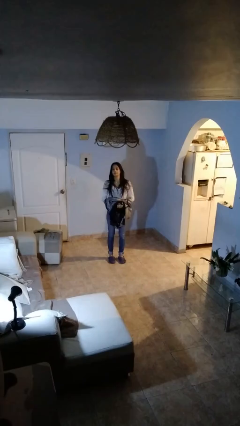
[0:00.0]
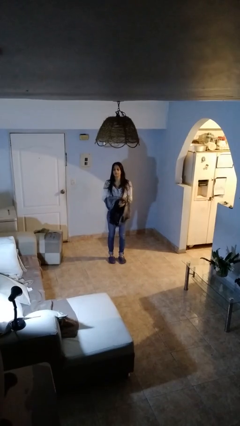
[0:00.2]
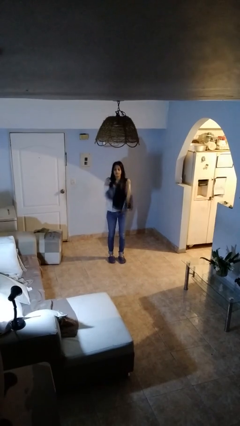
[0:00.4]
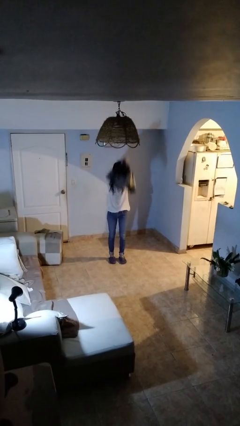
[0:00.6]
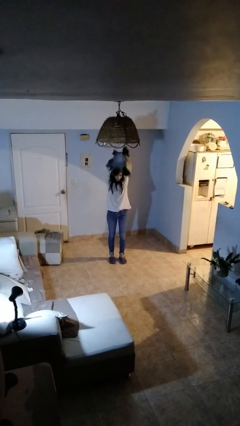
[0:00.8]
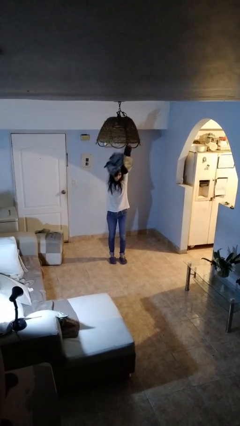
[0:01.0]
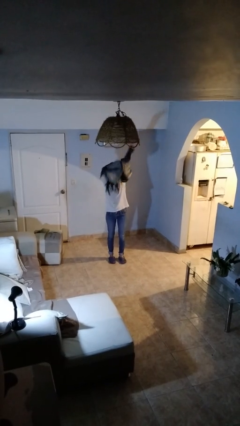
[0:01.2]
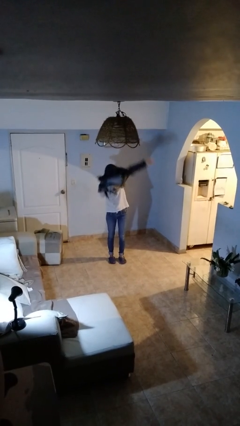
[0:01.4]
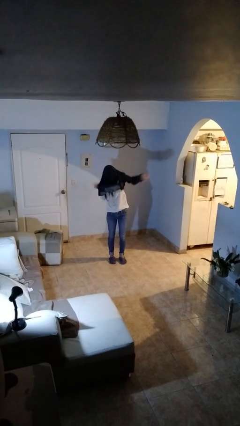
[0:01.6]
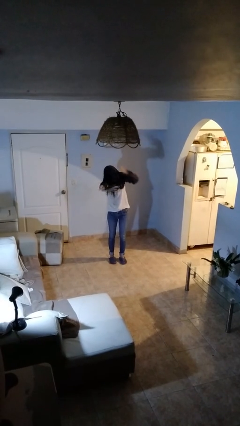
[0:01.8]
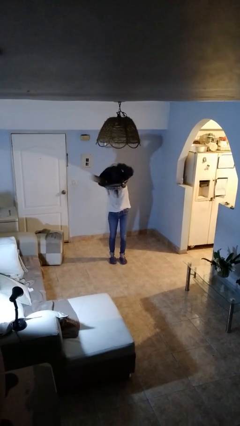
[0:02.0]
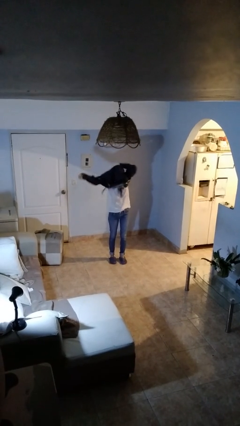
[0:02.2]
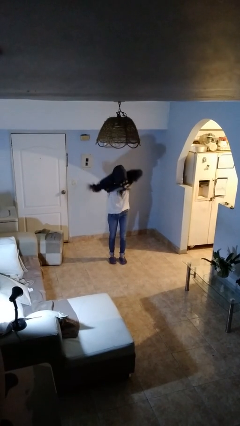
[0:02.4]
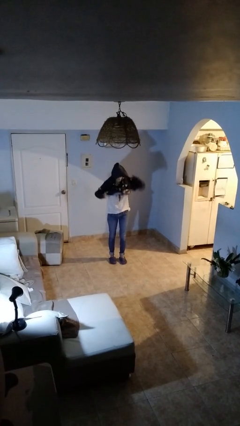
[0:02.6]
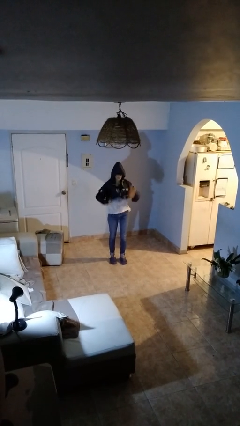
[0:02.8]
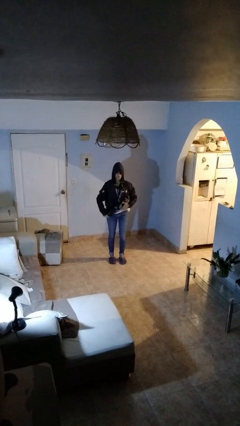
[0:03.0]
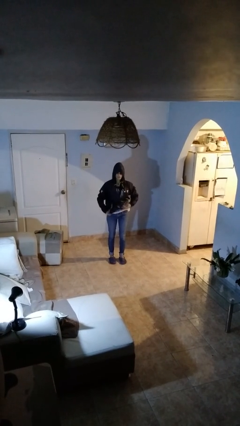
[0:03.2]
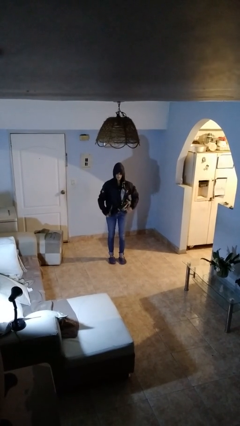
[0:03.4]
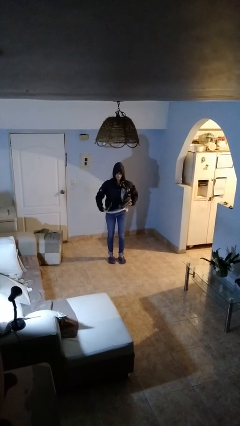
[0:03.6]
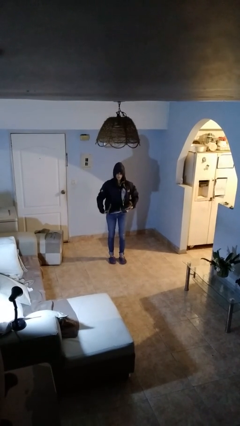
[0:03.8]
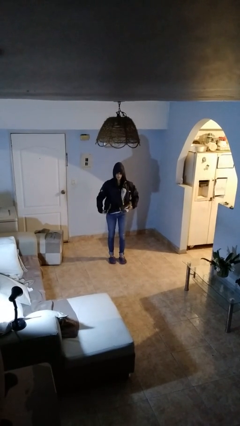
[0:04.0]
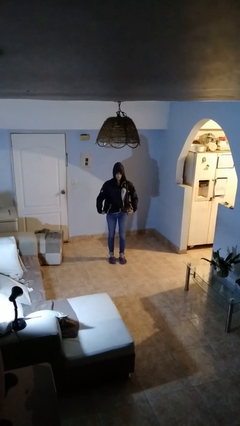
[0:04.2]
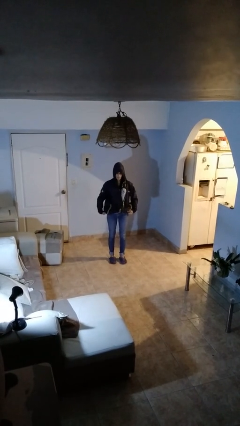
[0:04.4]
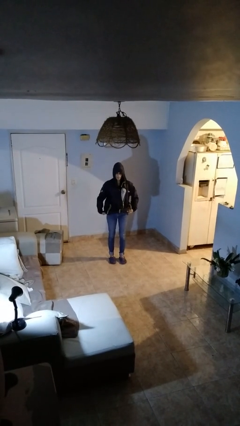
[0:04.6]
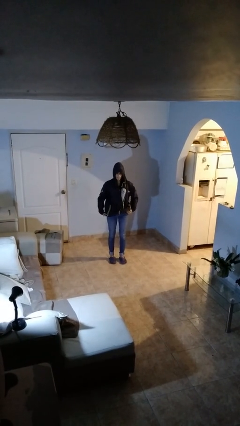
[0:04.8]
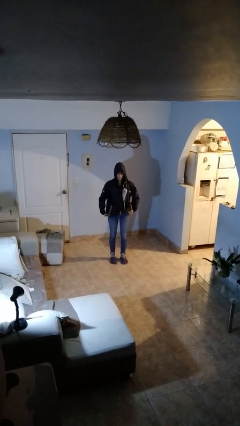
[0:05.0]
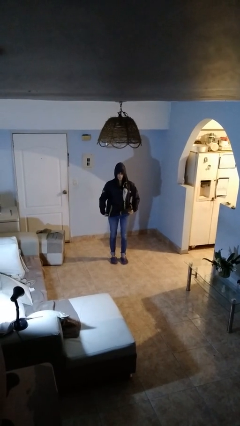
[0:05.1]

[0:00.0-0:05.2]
person puts on hoodie

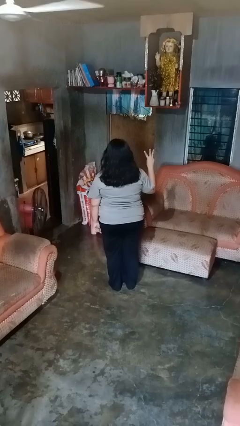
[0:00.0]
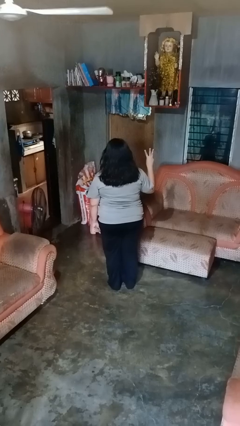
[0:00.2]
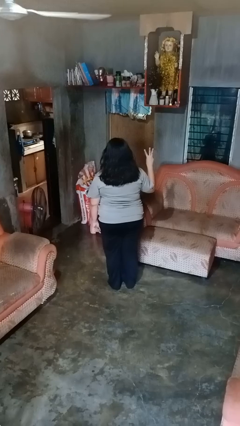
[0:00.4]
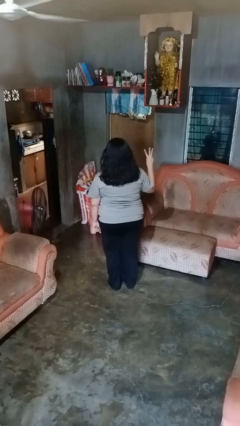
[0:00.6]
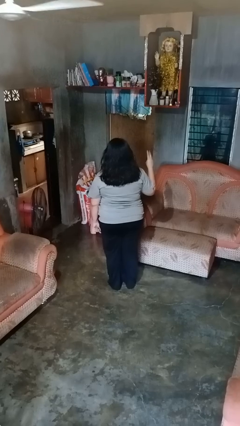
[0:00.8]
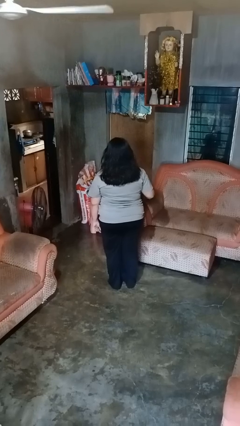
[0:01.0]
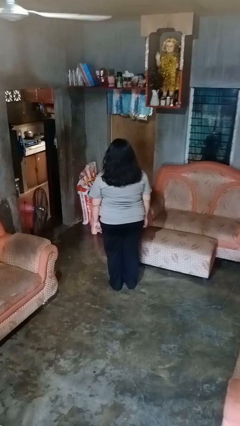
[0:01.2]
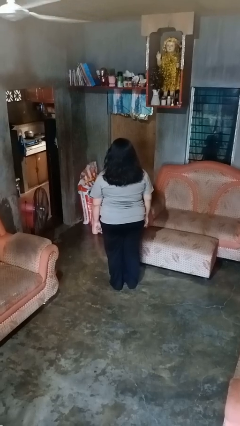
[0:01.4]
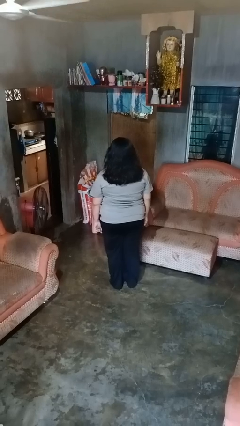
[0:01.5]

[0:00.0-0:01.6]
person gestures number three

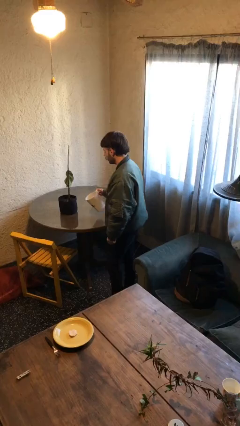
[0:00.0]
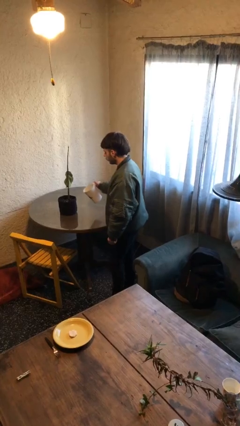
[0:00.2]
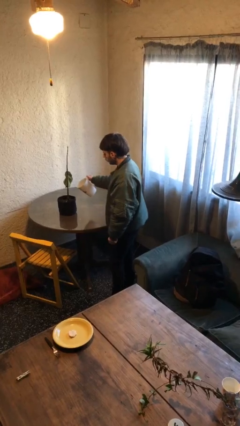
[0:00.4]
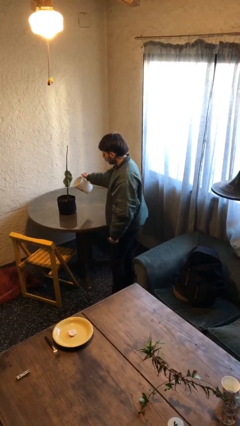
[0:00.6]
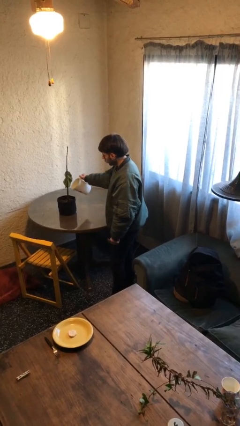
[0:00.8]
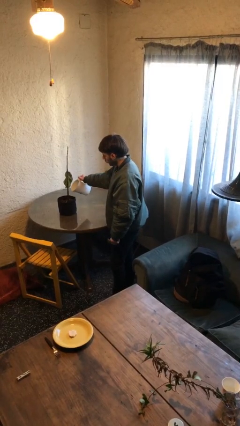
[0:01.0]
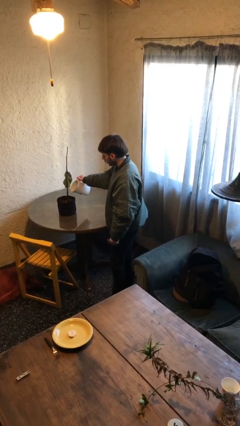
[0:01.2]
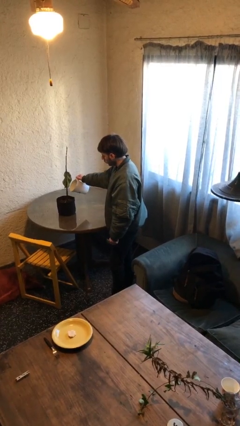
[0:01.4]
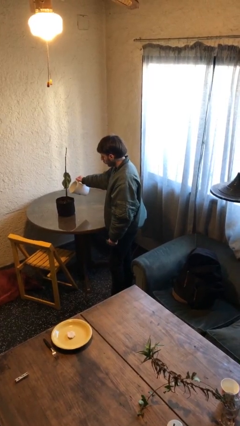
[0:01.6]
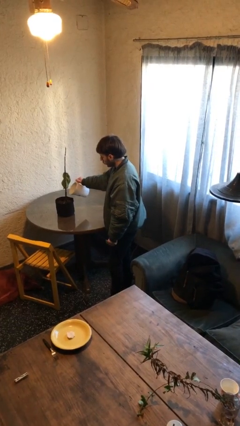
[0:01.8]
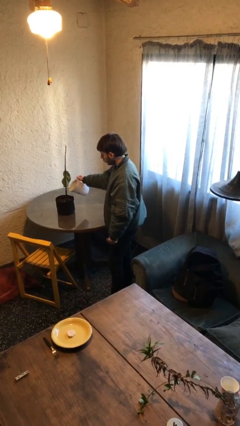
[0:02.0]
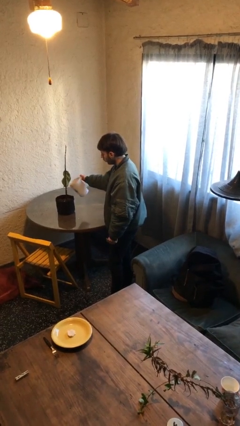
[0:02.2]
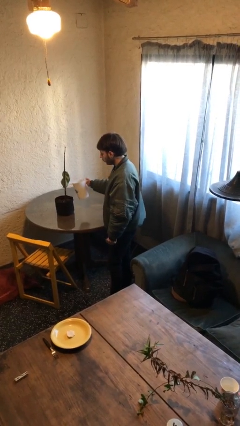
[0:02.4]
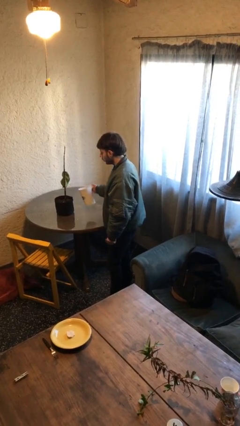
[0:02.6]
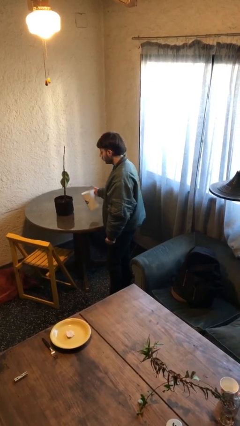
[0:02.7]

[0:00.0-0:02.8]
person waters houseplant

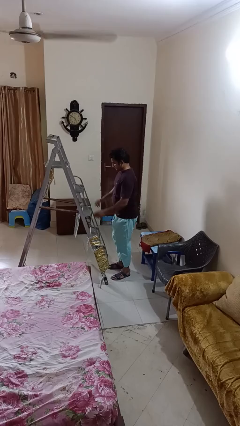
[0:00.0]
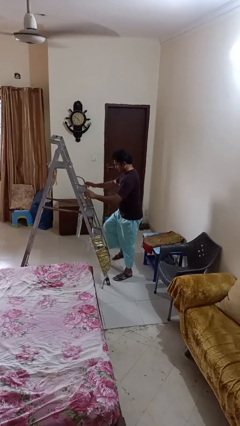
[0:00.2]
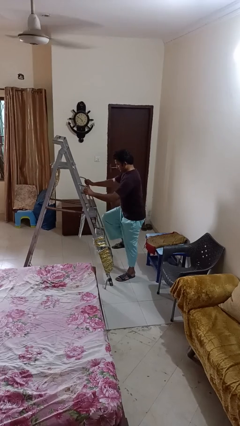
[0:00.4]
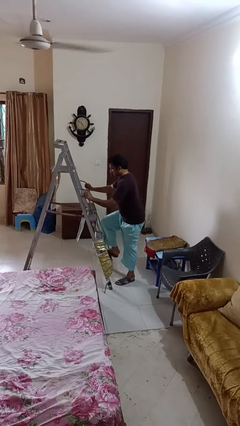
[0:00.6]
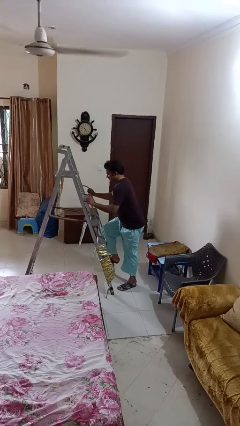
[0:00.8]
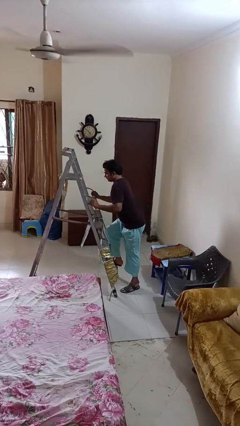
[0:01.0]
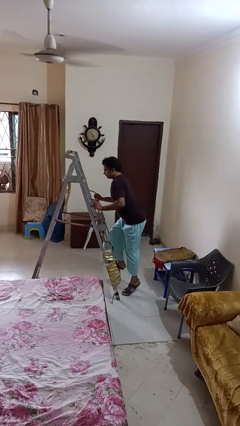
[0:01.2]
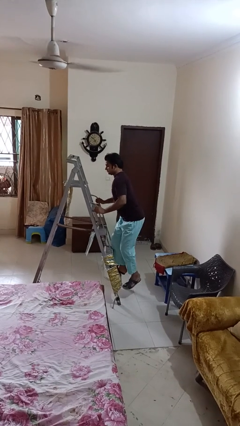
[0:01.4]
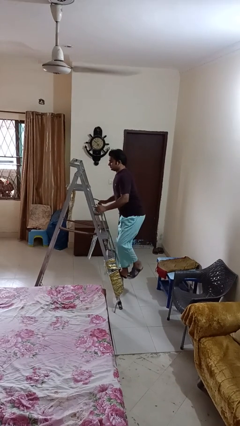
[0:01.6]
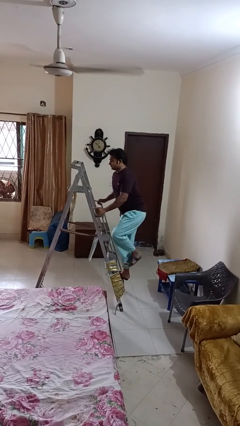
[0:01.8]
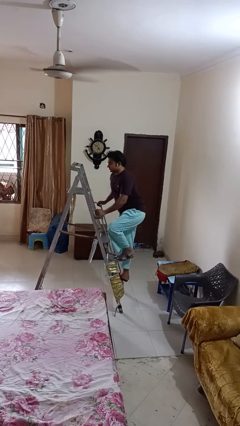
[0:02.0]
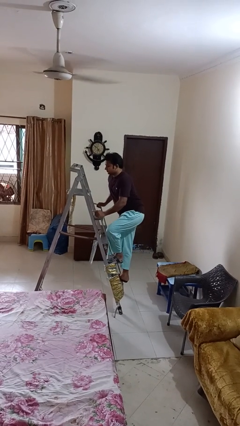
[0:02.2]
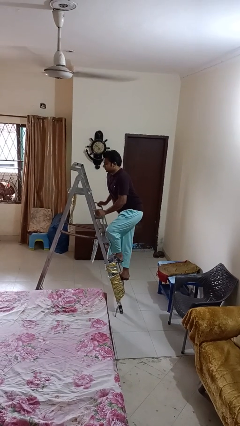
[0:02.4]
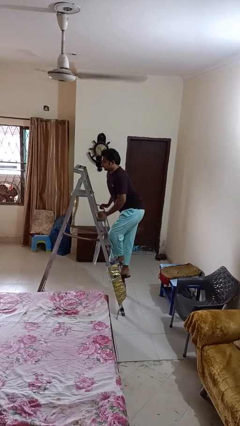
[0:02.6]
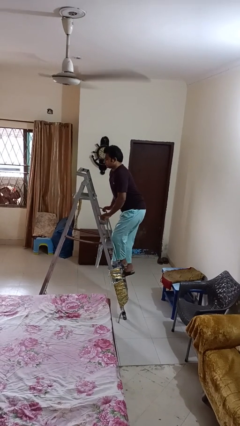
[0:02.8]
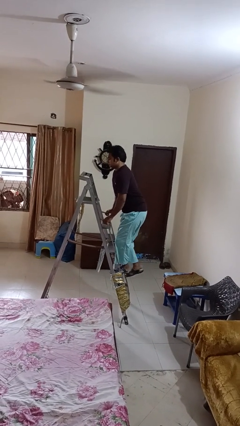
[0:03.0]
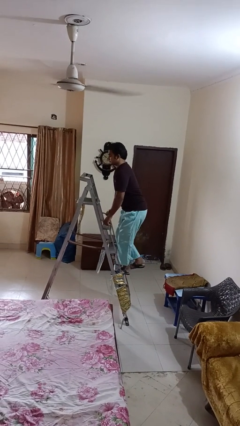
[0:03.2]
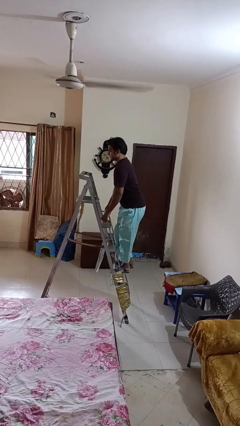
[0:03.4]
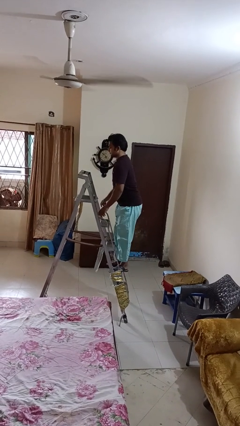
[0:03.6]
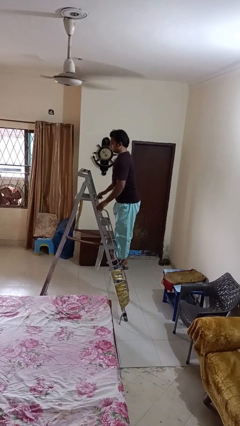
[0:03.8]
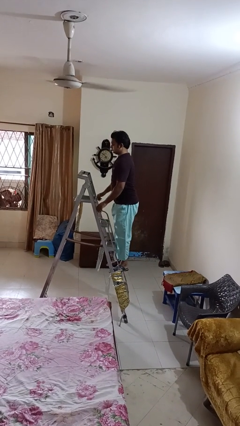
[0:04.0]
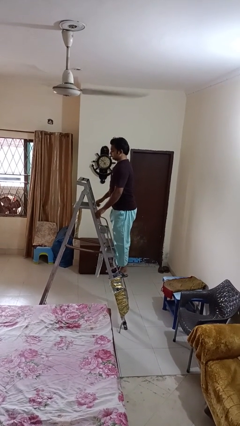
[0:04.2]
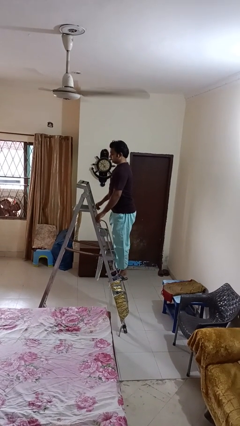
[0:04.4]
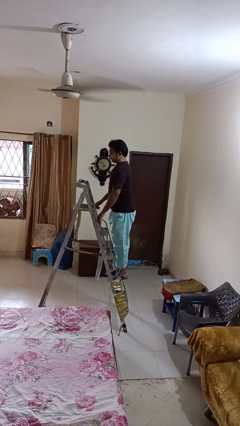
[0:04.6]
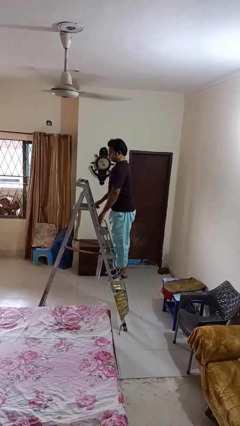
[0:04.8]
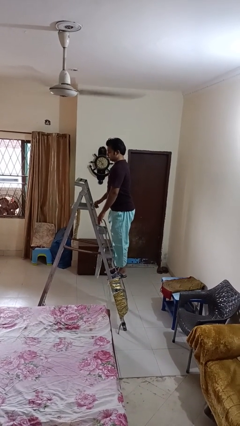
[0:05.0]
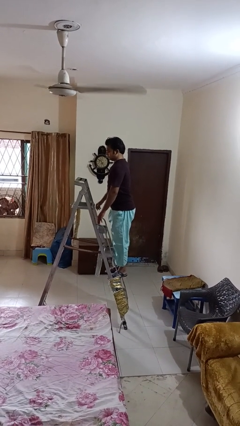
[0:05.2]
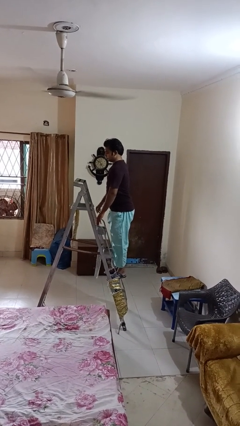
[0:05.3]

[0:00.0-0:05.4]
person climbs up ladder

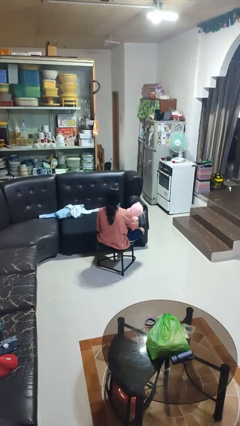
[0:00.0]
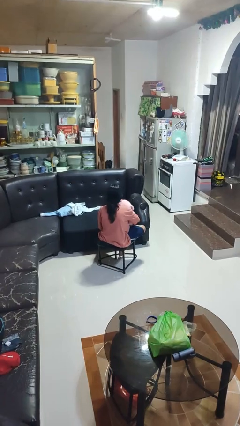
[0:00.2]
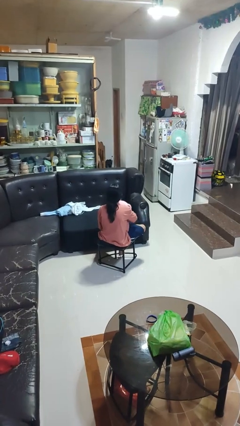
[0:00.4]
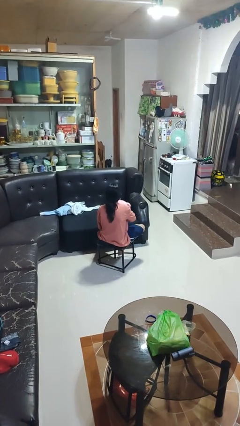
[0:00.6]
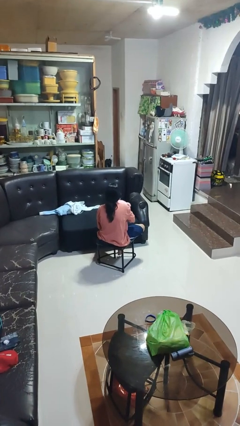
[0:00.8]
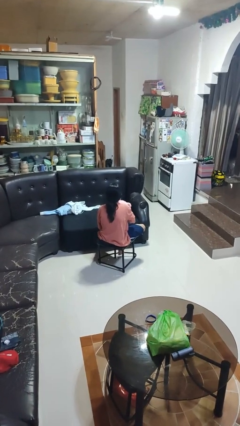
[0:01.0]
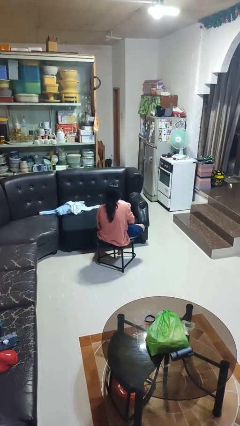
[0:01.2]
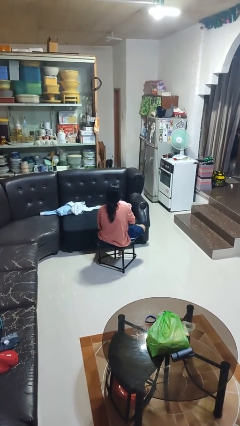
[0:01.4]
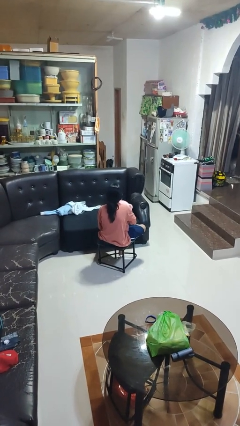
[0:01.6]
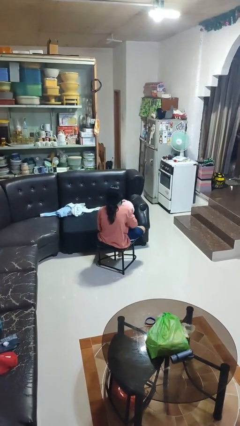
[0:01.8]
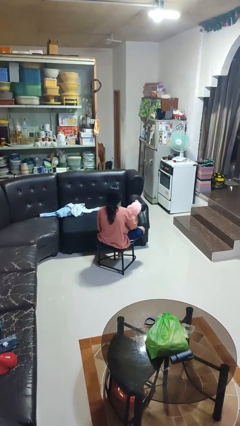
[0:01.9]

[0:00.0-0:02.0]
person hugs stuffed animal

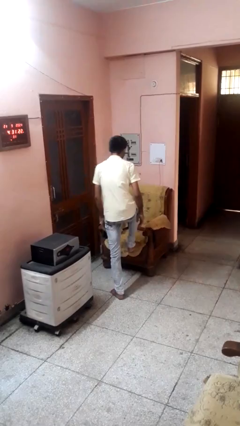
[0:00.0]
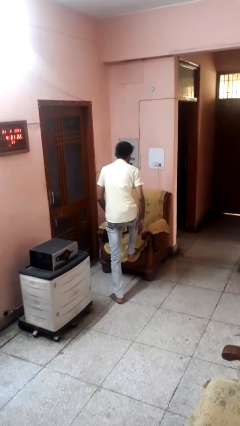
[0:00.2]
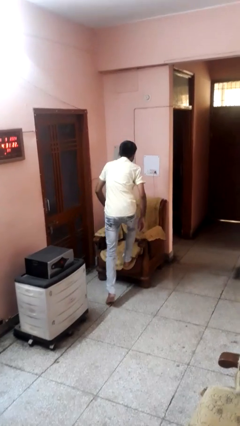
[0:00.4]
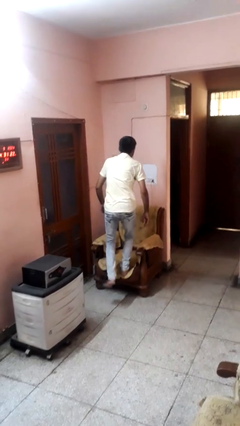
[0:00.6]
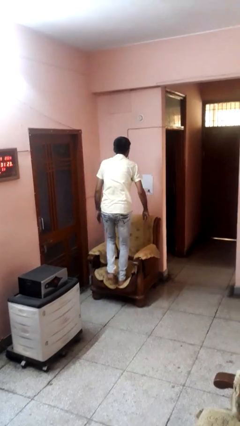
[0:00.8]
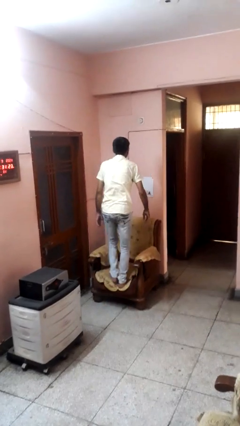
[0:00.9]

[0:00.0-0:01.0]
person climbs on couch
